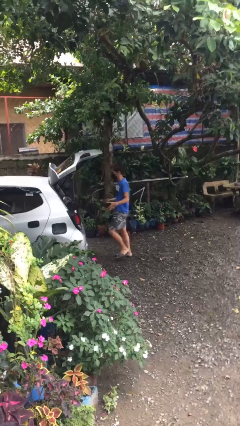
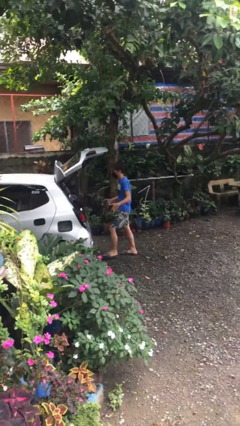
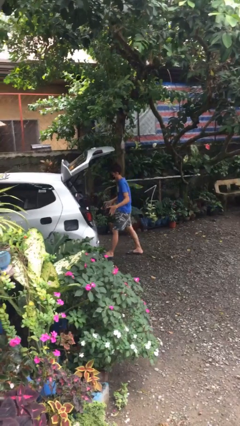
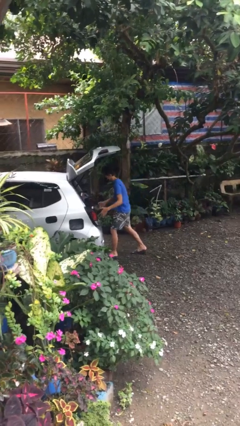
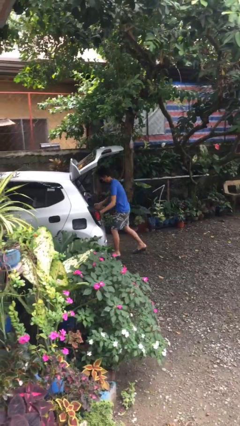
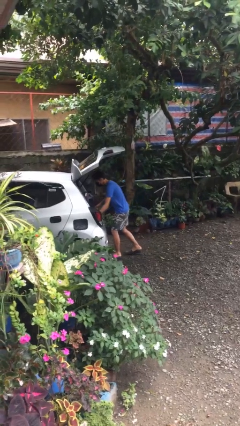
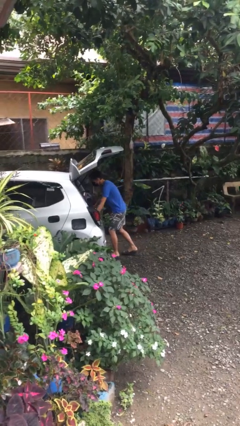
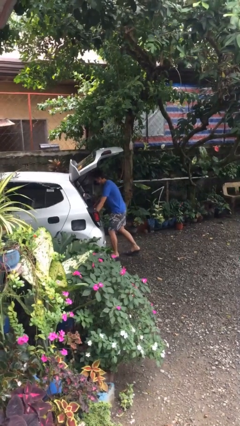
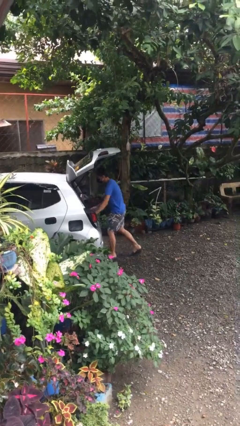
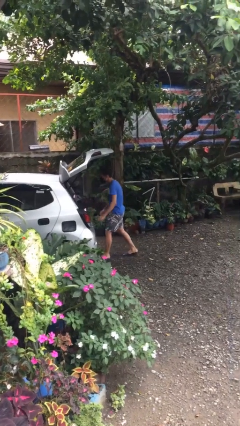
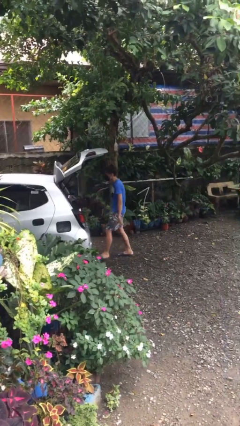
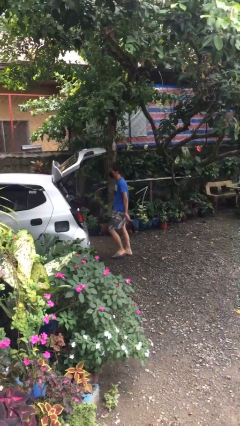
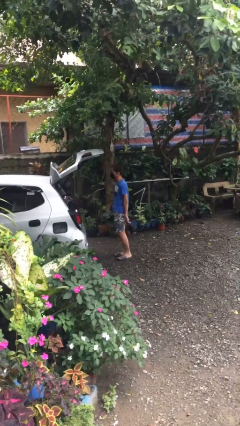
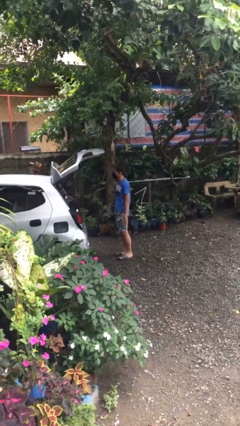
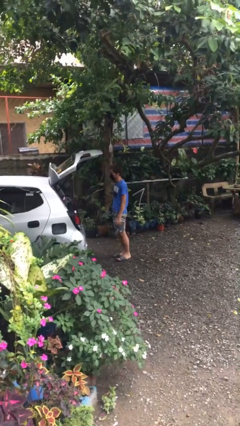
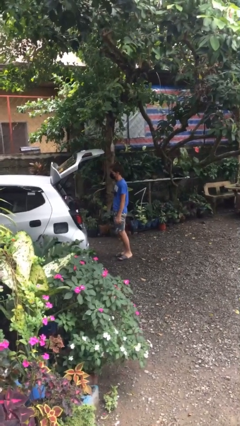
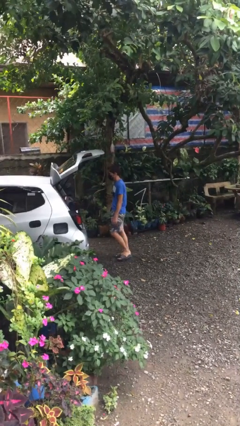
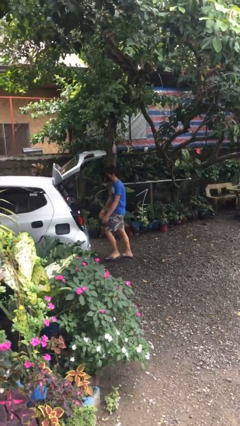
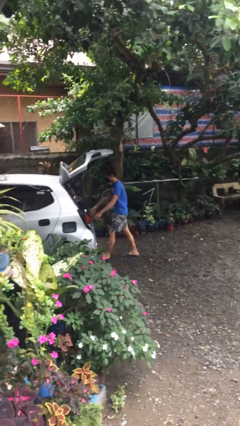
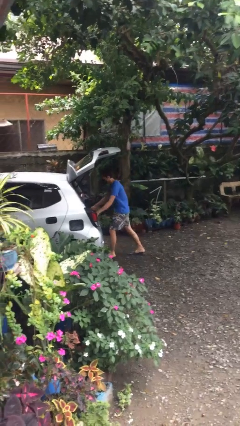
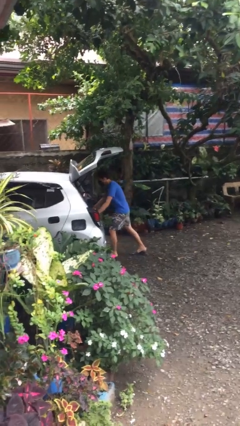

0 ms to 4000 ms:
person loads car

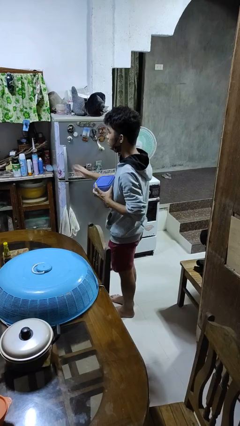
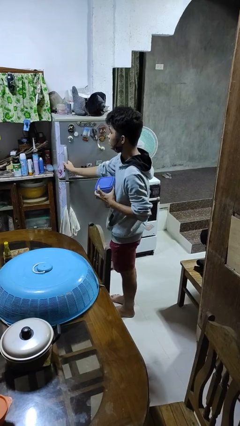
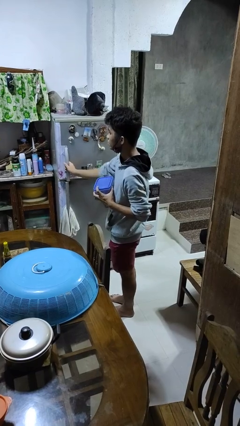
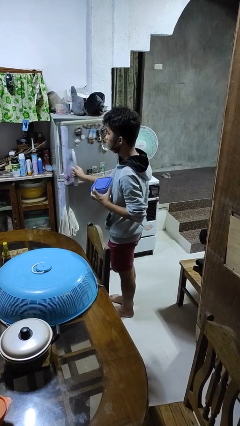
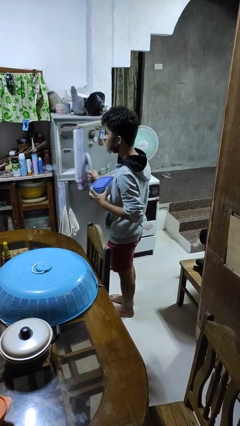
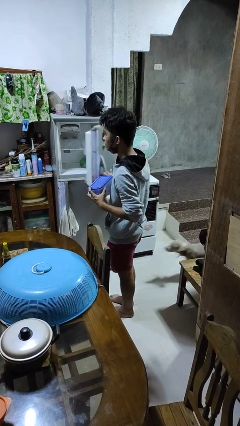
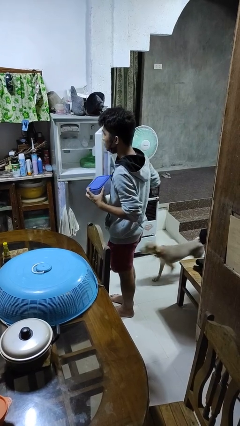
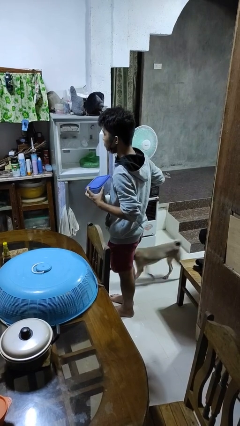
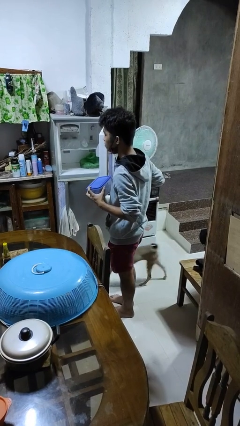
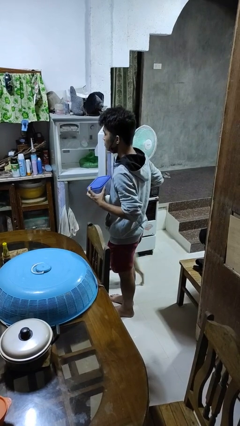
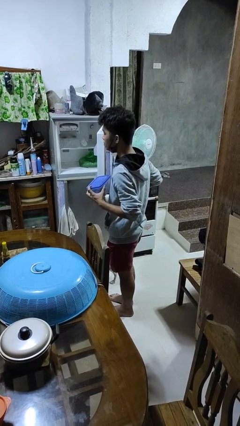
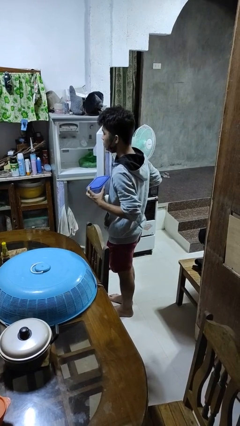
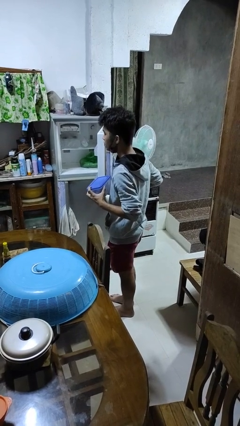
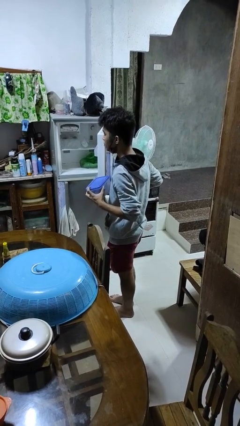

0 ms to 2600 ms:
person opens refrigerator

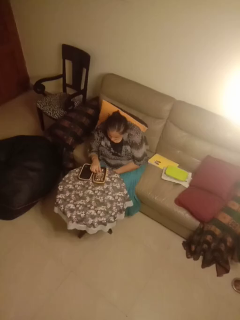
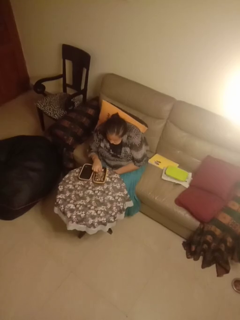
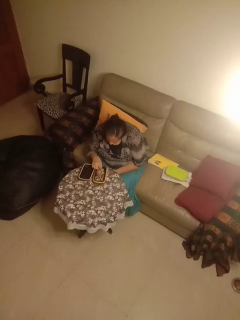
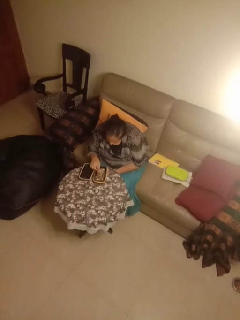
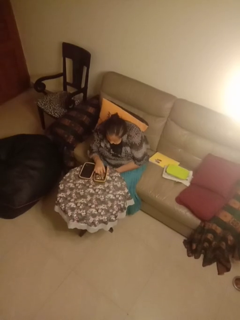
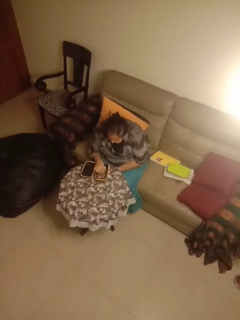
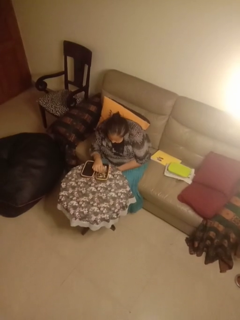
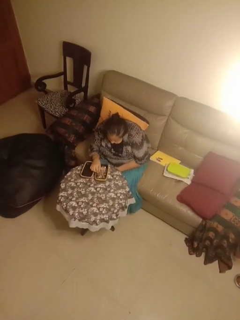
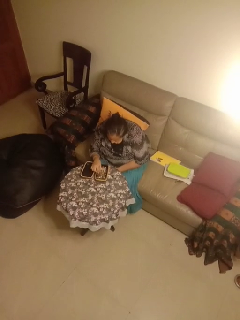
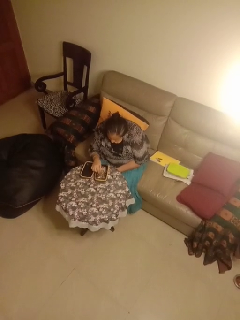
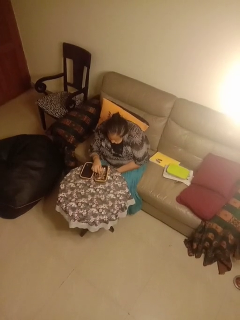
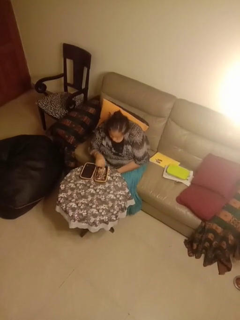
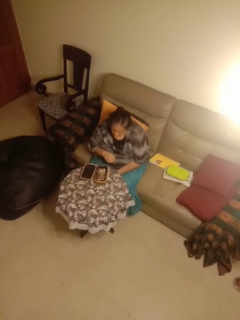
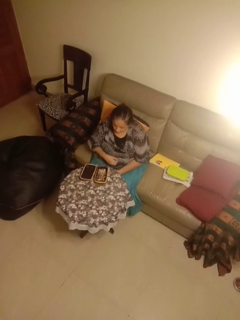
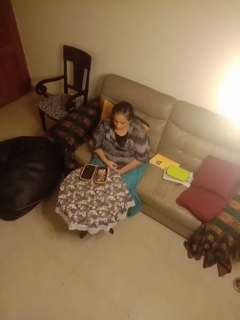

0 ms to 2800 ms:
person searches jewelry box

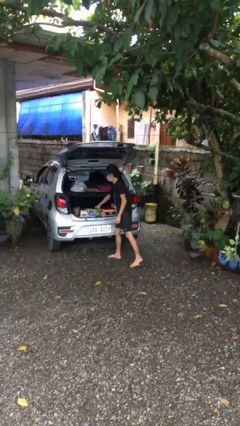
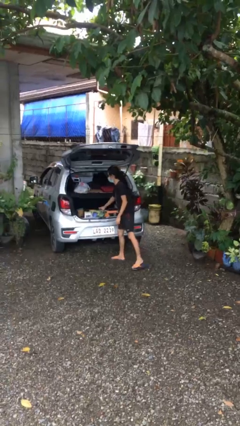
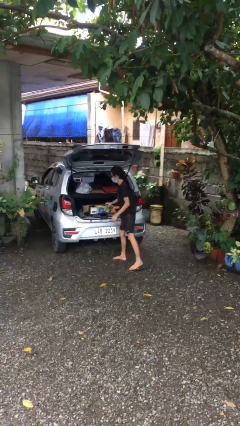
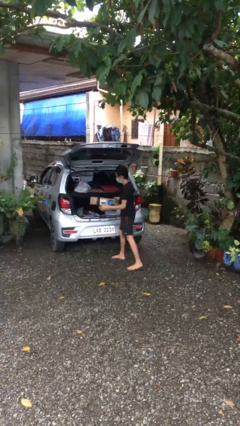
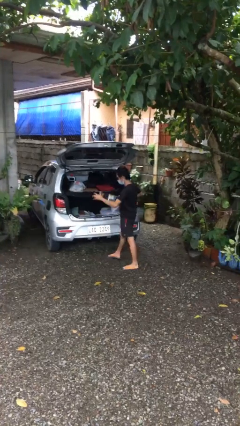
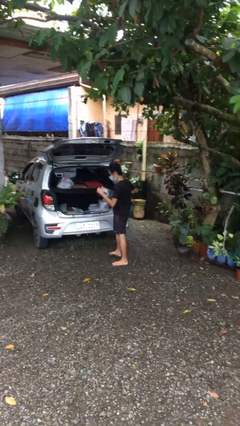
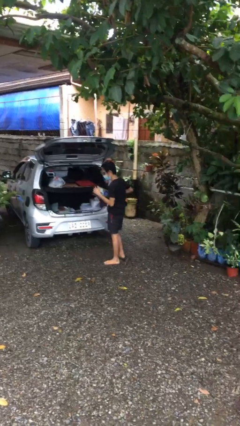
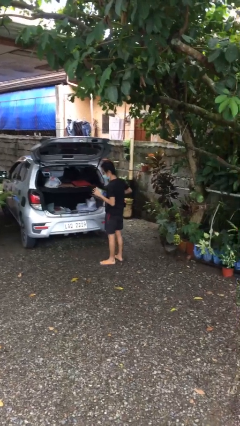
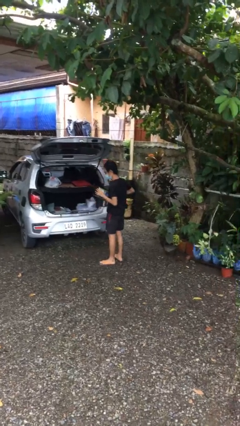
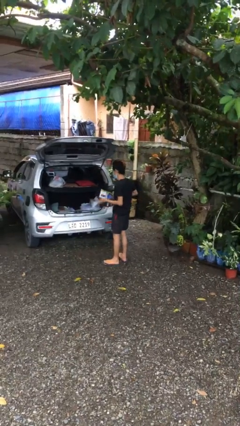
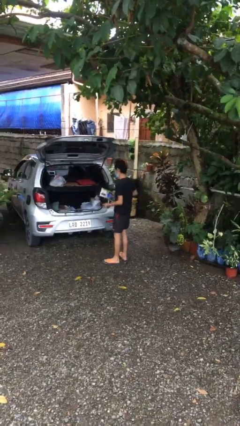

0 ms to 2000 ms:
person unloads car

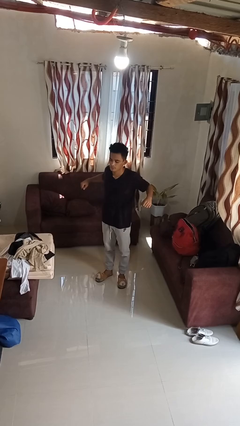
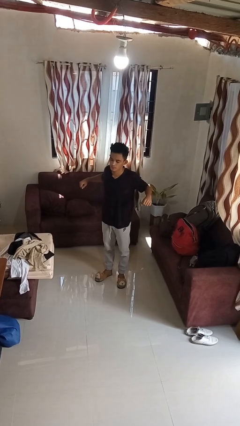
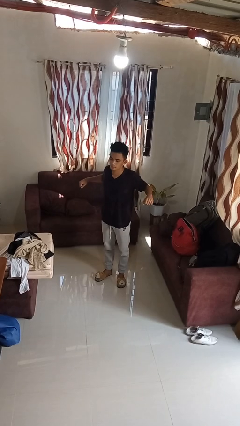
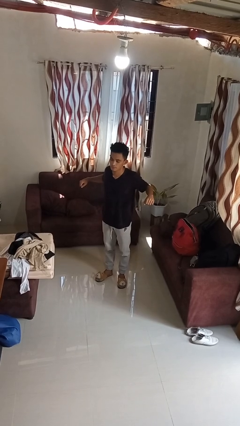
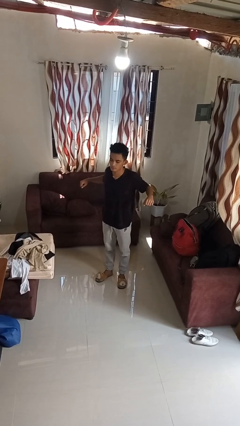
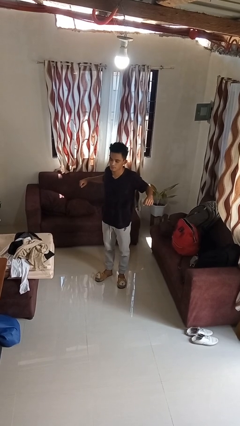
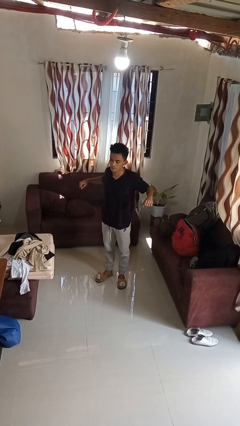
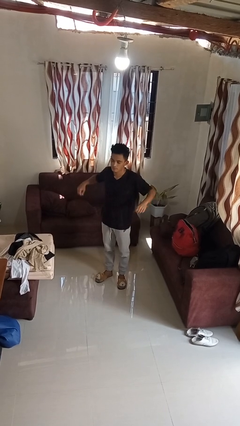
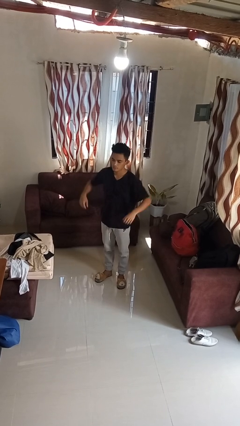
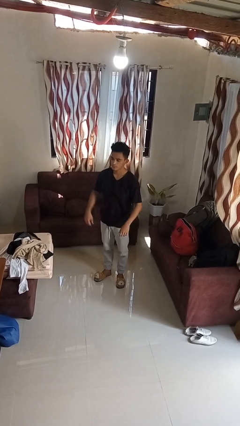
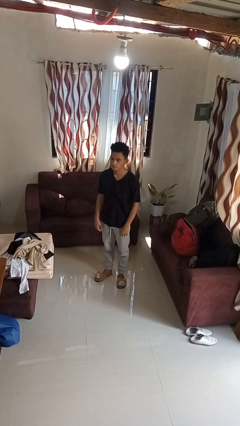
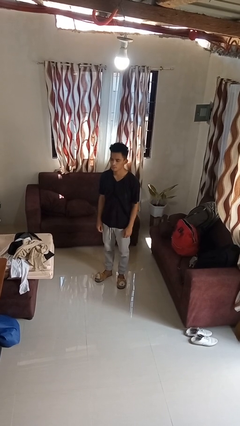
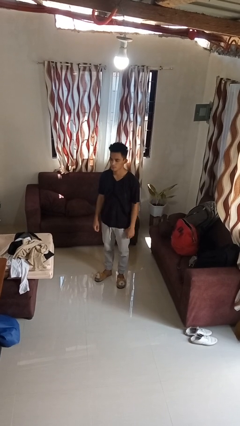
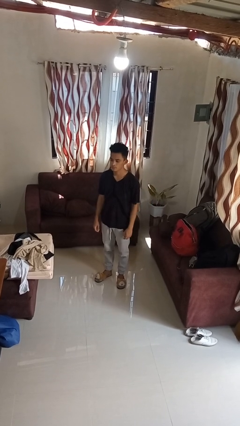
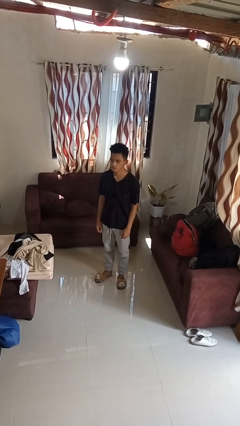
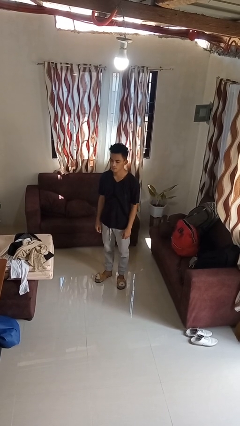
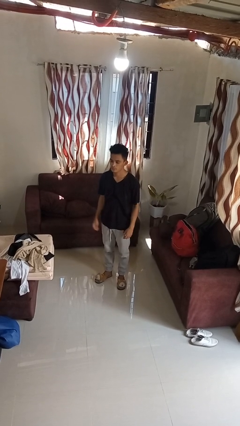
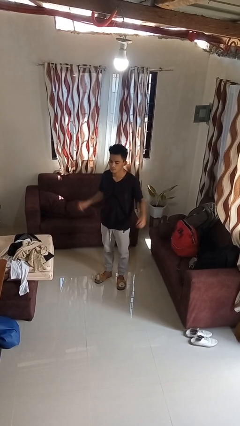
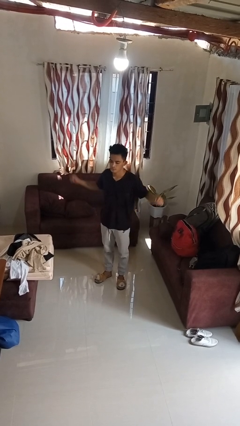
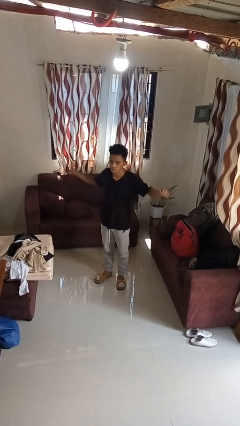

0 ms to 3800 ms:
person stretches back

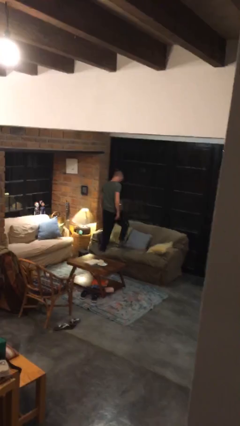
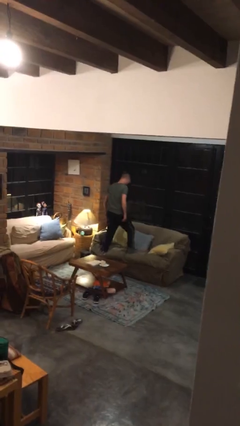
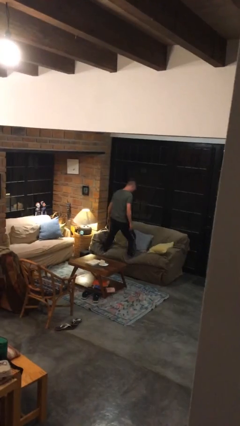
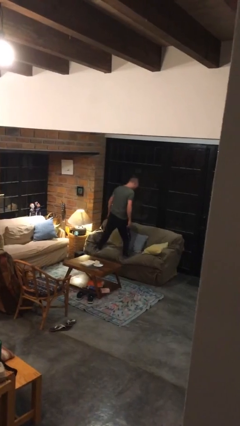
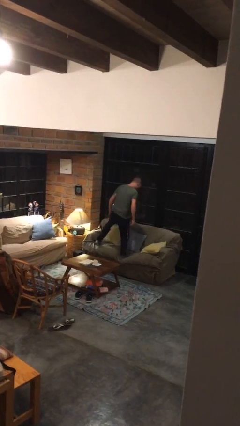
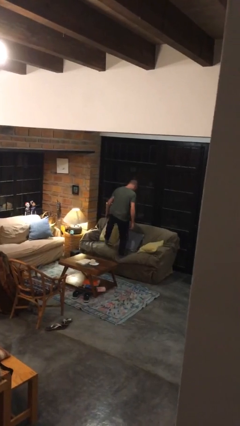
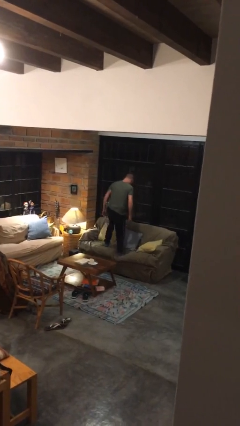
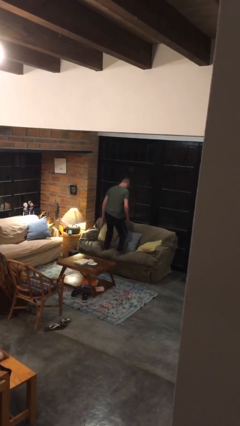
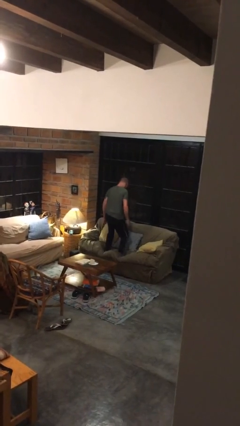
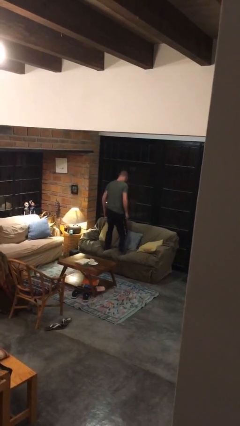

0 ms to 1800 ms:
person jumps on couch

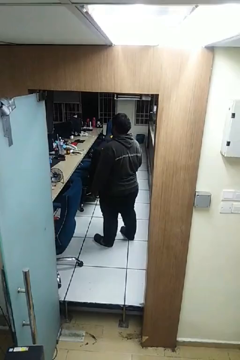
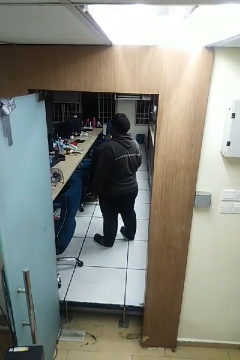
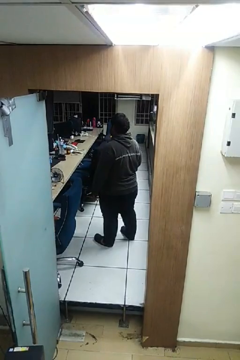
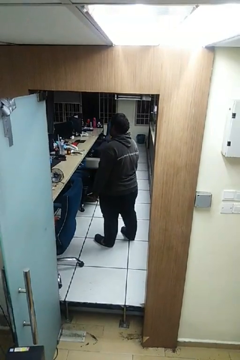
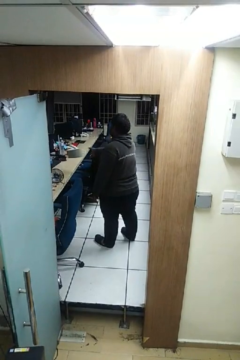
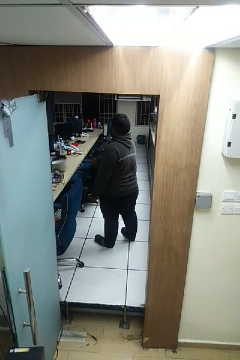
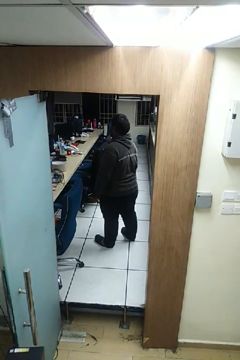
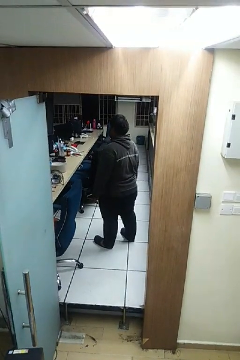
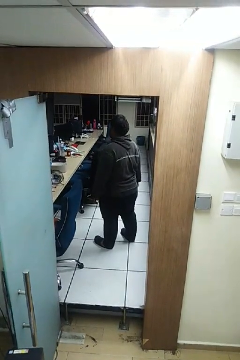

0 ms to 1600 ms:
person throws object on table
